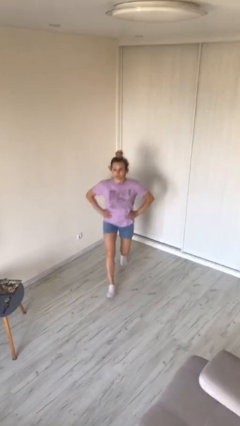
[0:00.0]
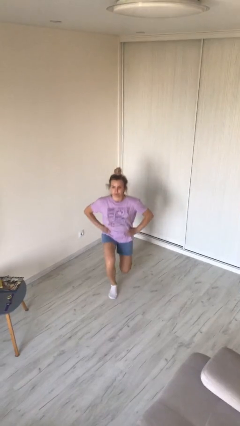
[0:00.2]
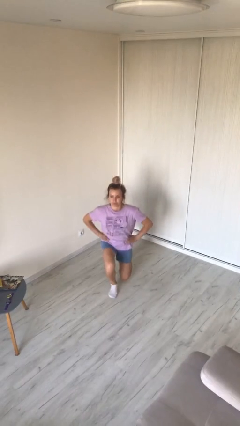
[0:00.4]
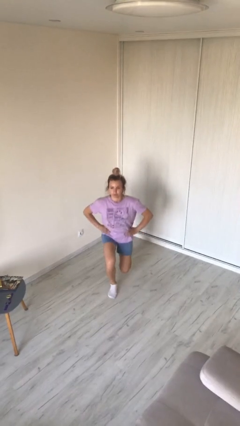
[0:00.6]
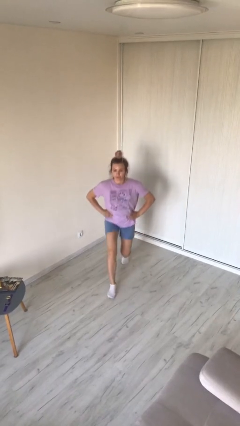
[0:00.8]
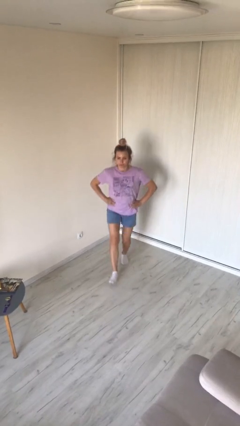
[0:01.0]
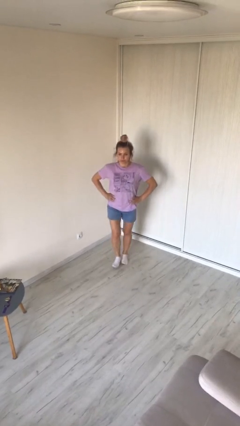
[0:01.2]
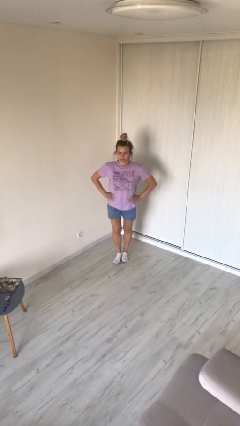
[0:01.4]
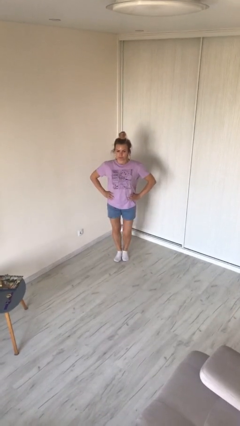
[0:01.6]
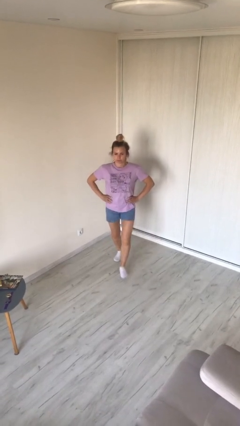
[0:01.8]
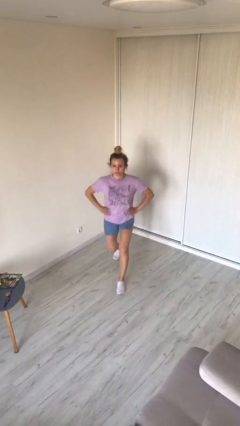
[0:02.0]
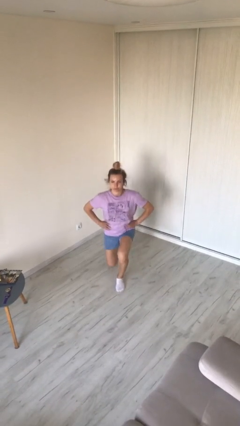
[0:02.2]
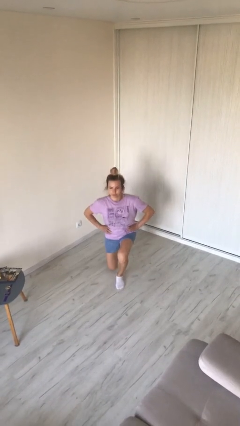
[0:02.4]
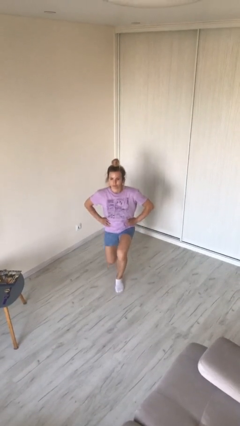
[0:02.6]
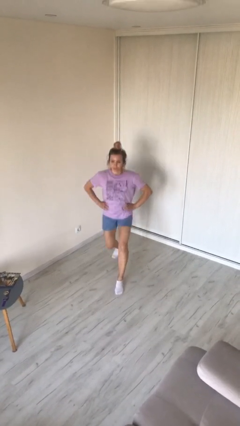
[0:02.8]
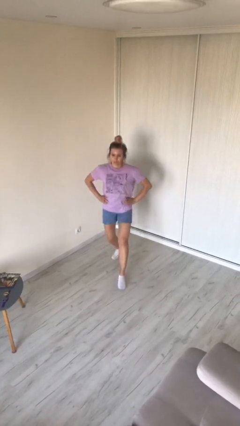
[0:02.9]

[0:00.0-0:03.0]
person exercises with lunges

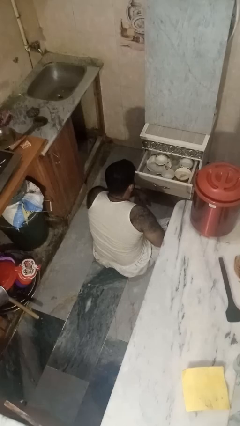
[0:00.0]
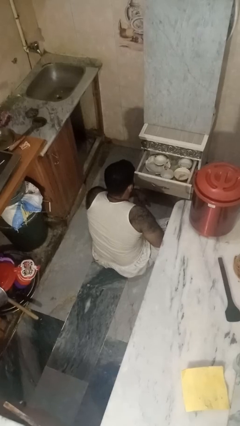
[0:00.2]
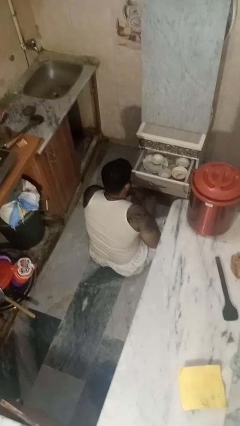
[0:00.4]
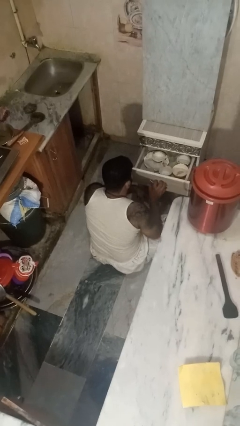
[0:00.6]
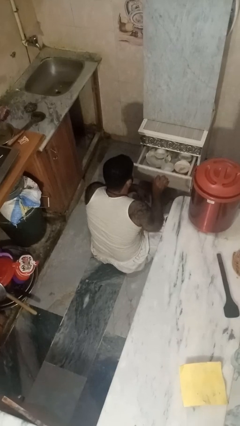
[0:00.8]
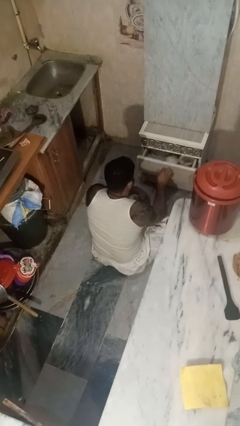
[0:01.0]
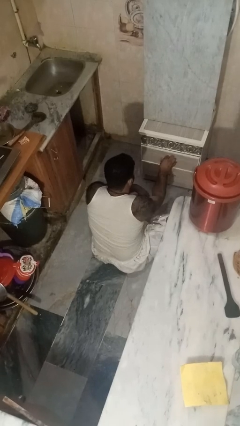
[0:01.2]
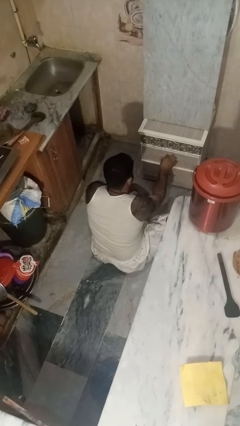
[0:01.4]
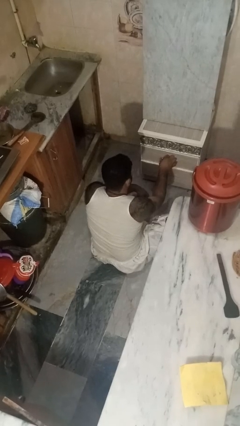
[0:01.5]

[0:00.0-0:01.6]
person closes kitchen drawer

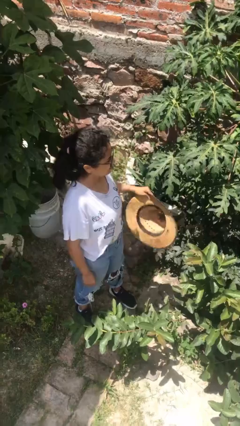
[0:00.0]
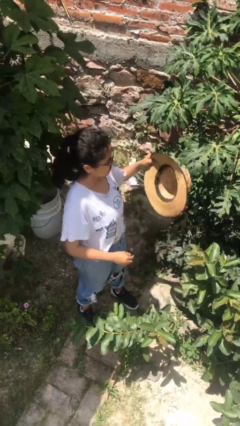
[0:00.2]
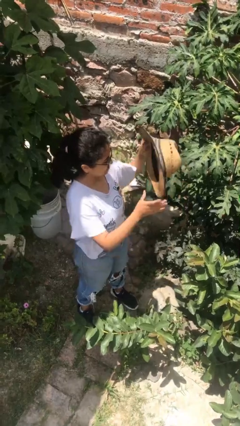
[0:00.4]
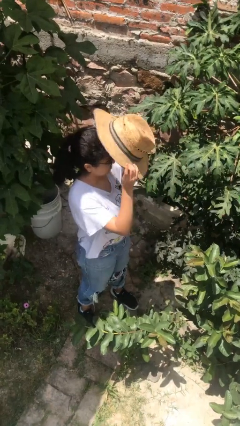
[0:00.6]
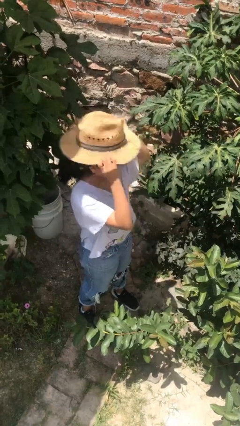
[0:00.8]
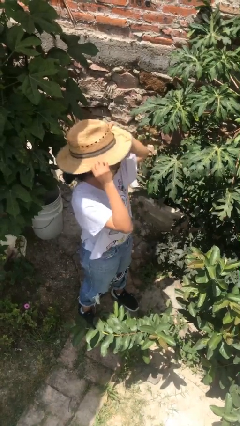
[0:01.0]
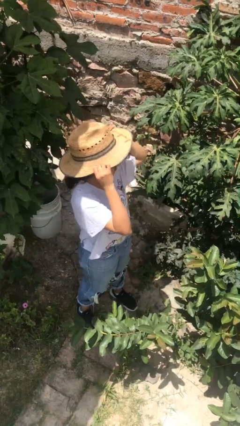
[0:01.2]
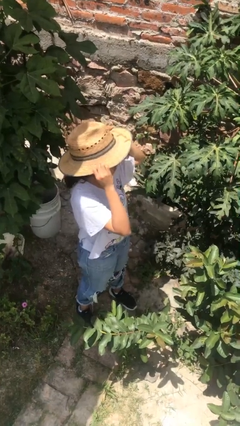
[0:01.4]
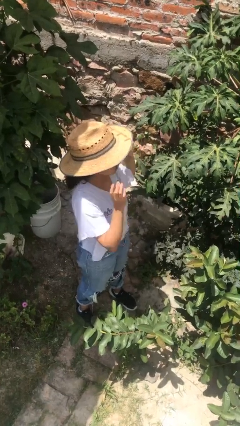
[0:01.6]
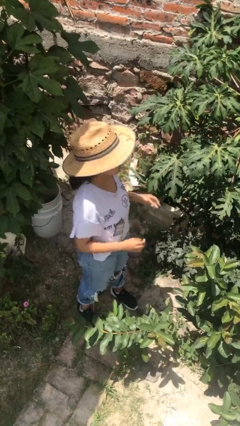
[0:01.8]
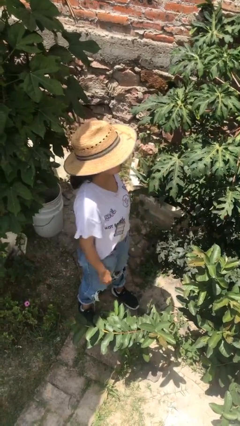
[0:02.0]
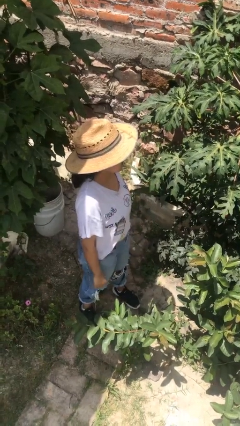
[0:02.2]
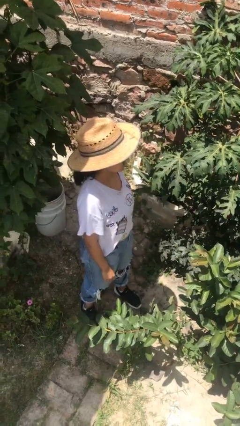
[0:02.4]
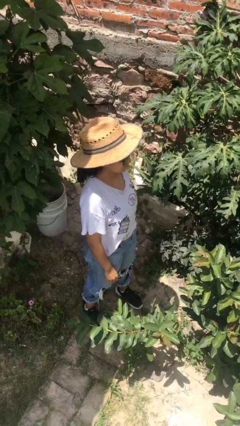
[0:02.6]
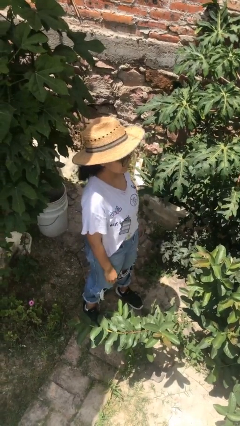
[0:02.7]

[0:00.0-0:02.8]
person puts on hat

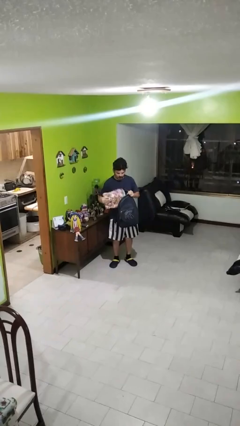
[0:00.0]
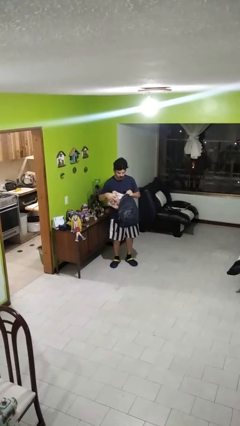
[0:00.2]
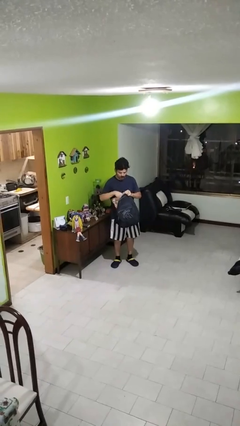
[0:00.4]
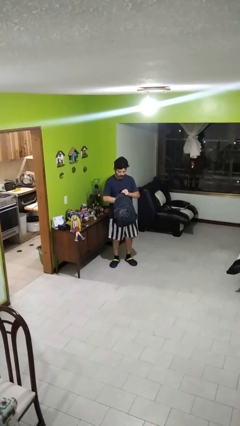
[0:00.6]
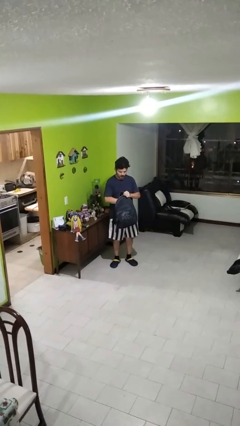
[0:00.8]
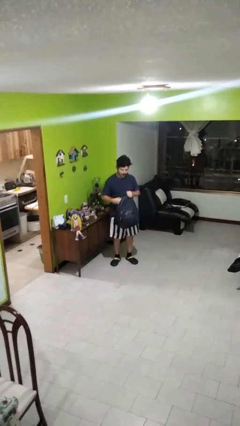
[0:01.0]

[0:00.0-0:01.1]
person puts object into backpack

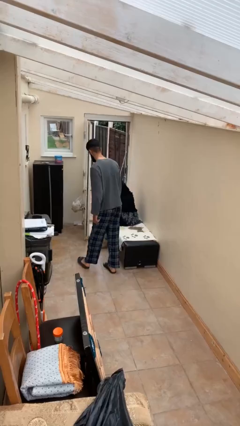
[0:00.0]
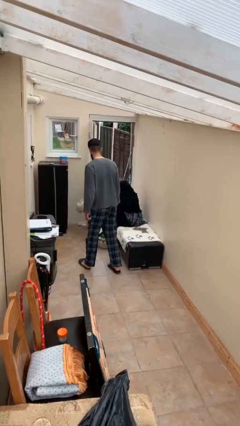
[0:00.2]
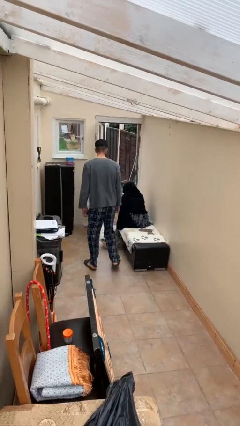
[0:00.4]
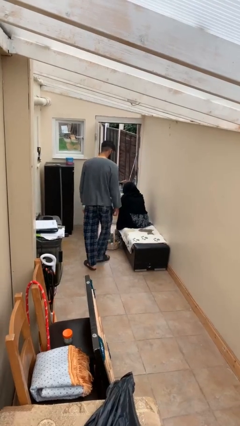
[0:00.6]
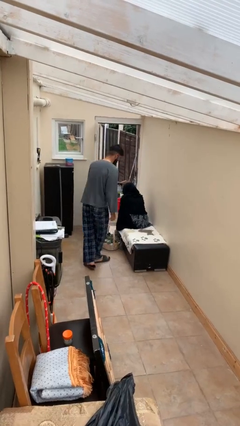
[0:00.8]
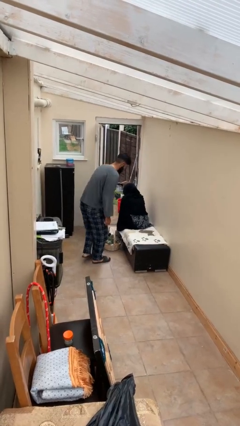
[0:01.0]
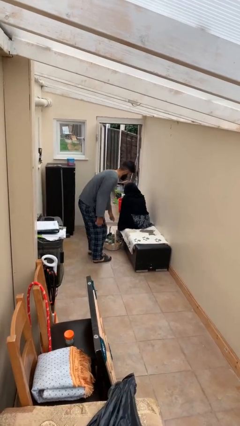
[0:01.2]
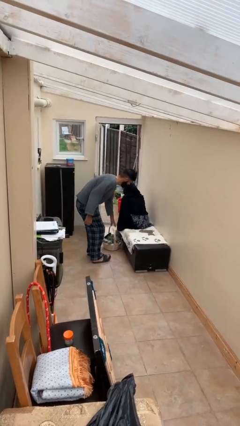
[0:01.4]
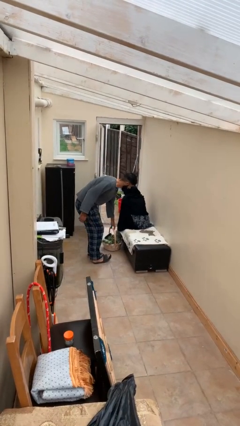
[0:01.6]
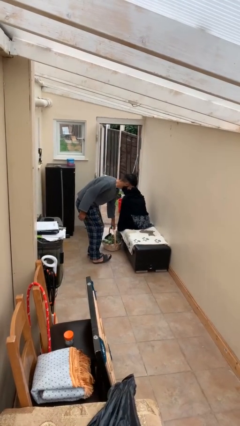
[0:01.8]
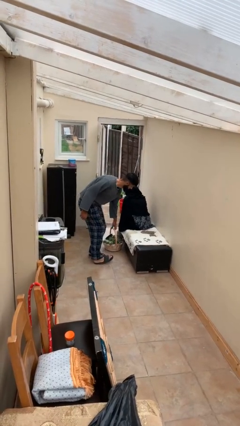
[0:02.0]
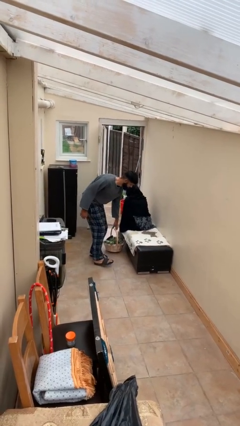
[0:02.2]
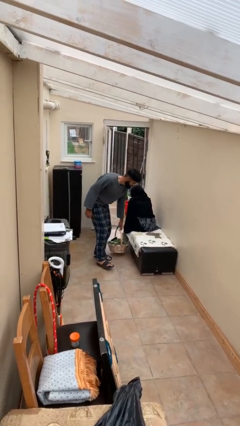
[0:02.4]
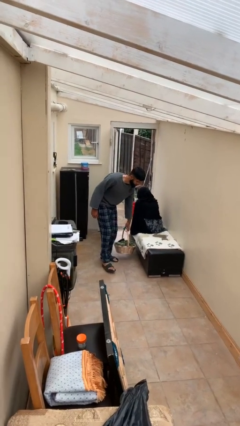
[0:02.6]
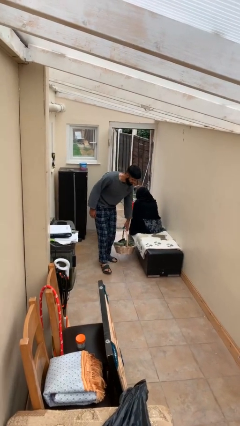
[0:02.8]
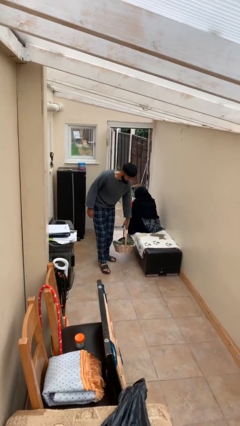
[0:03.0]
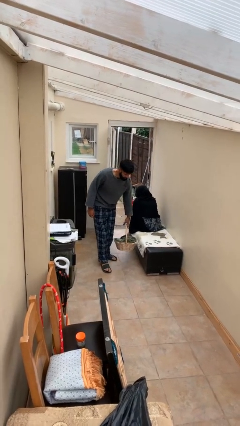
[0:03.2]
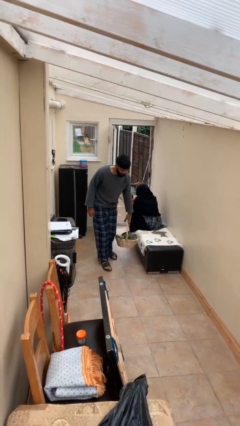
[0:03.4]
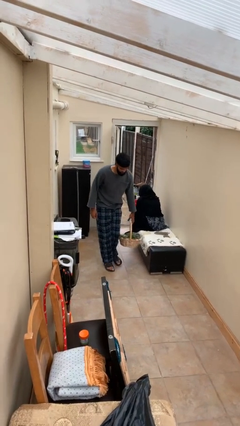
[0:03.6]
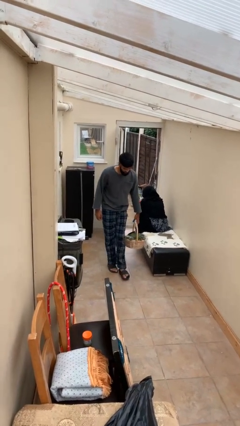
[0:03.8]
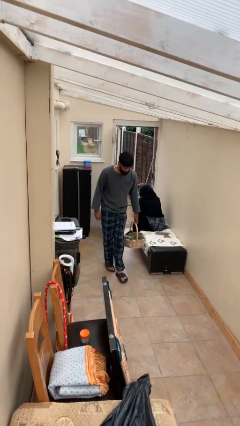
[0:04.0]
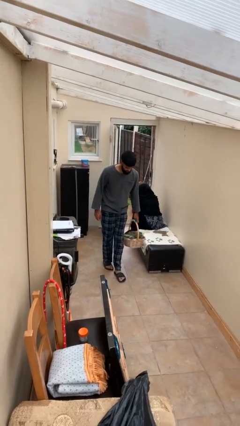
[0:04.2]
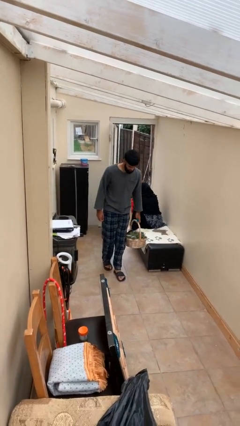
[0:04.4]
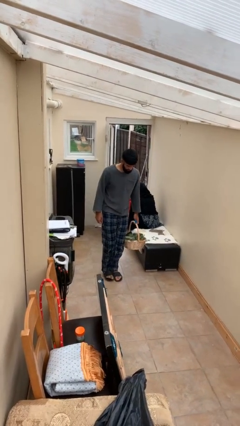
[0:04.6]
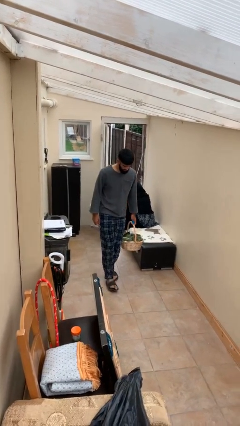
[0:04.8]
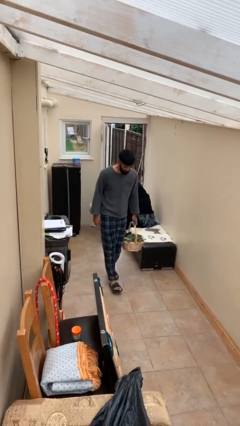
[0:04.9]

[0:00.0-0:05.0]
person steals object from person

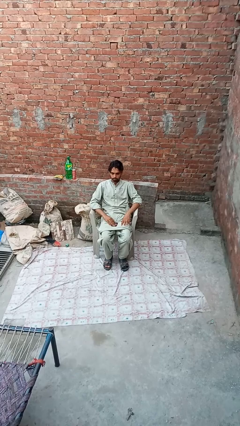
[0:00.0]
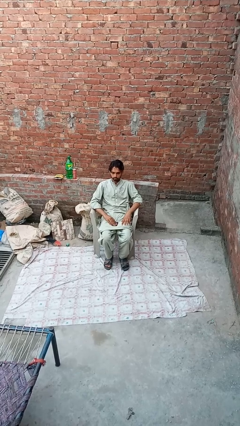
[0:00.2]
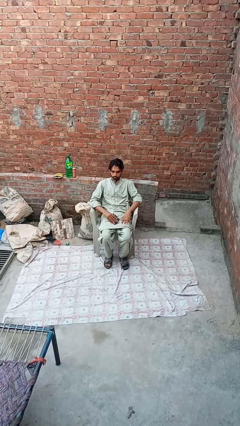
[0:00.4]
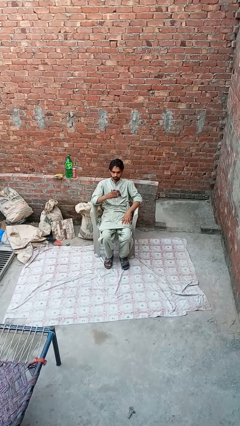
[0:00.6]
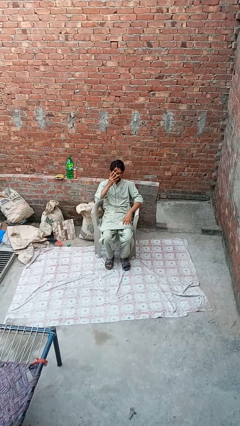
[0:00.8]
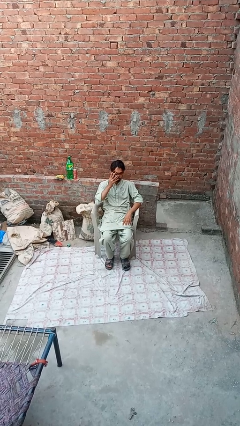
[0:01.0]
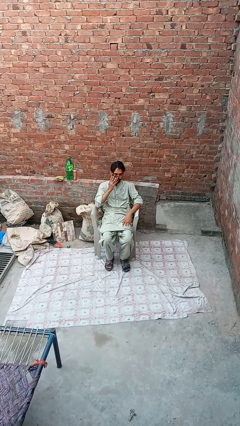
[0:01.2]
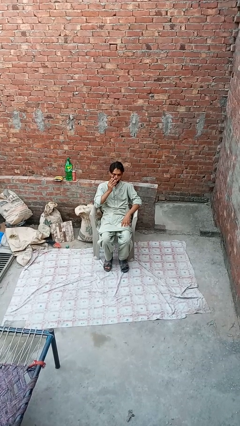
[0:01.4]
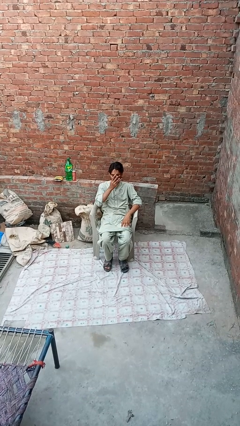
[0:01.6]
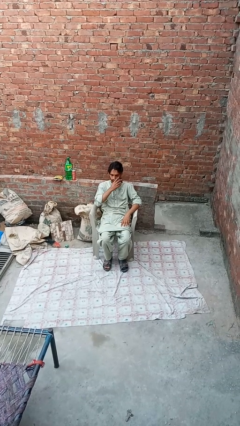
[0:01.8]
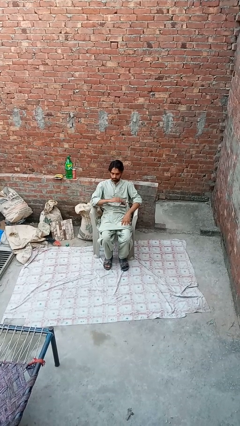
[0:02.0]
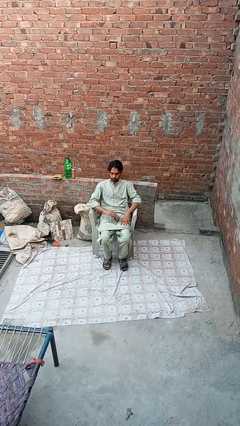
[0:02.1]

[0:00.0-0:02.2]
person wipes mouth with napkin

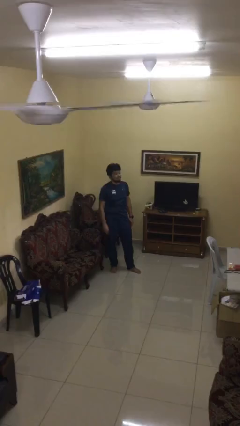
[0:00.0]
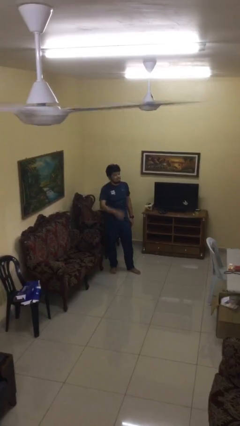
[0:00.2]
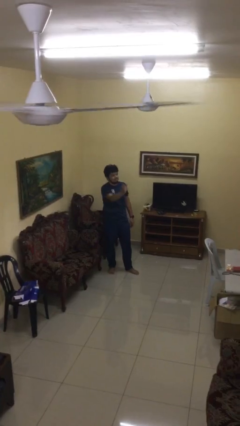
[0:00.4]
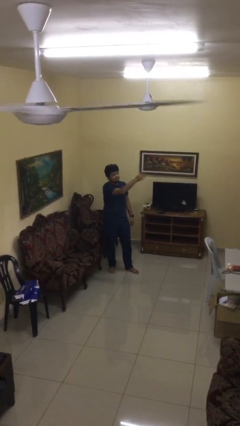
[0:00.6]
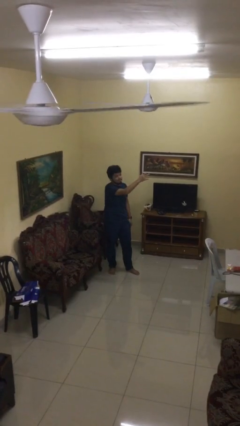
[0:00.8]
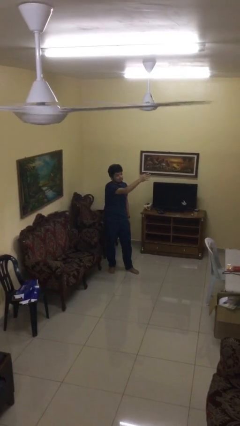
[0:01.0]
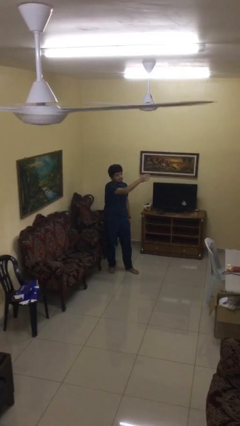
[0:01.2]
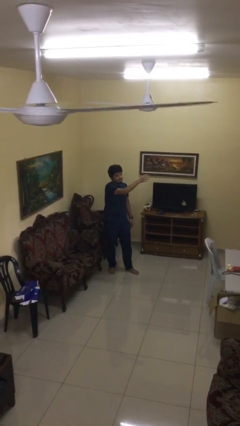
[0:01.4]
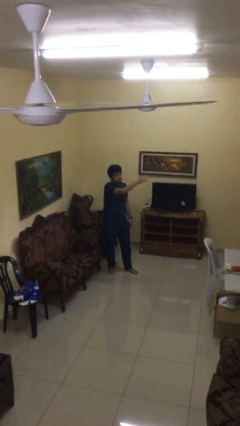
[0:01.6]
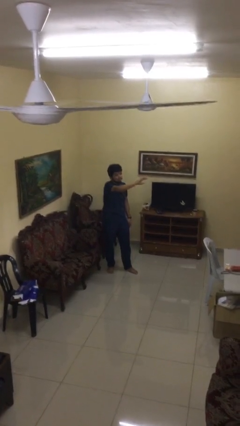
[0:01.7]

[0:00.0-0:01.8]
person gestures swipe left
